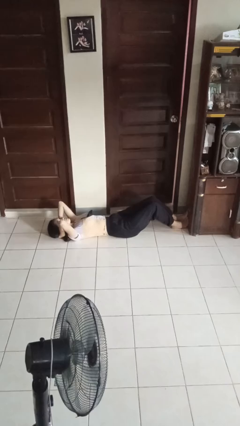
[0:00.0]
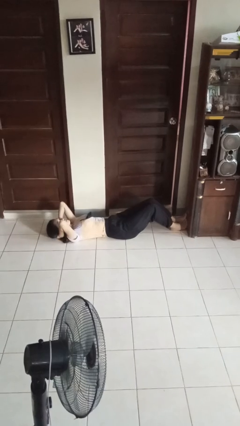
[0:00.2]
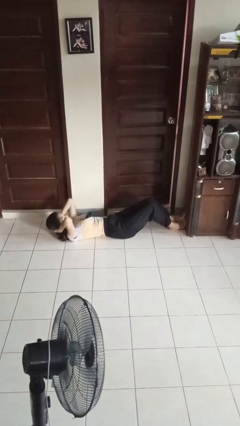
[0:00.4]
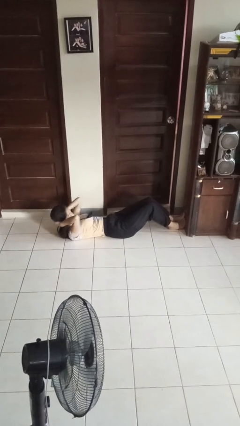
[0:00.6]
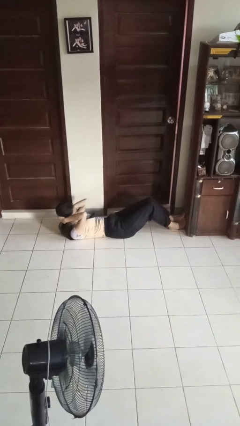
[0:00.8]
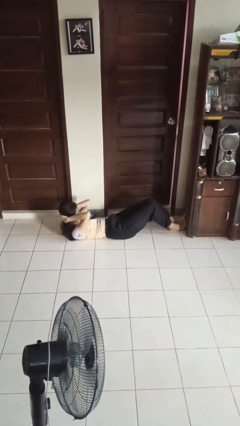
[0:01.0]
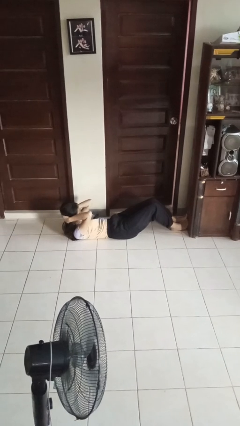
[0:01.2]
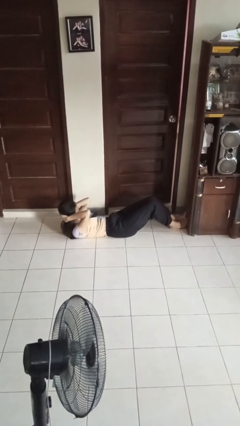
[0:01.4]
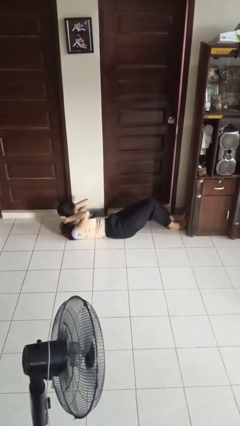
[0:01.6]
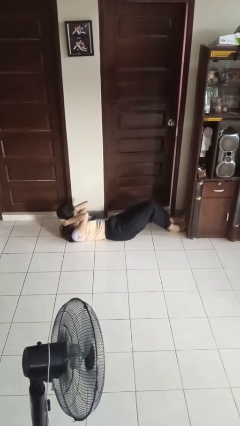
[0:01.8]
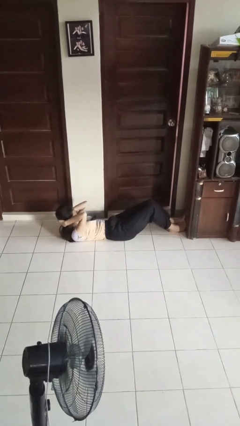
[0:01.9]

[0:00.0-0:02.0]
person exercises with situp

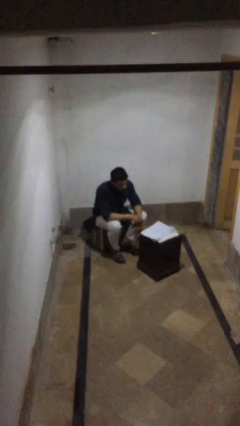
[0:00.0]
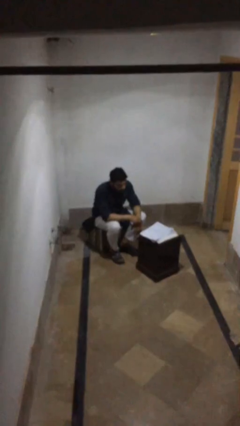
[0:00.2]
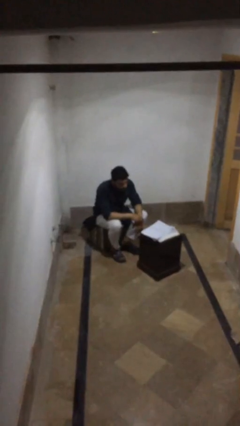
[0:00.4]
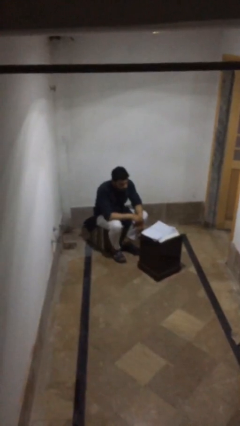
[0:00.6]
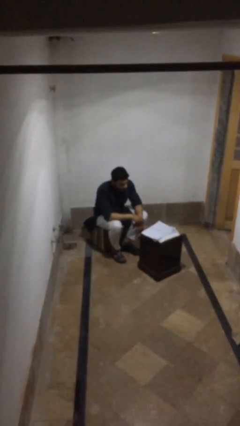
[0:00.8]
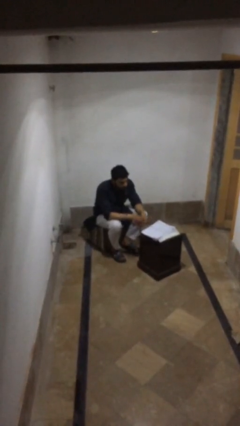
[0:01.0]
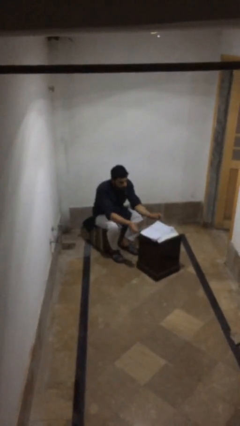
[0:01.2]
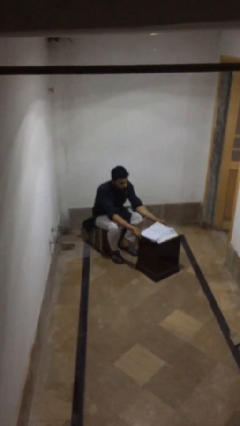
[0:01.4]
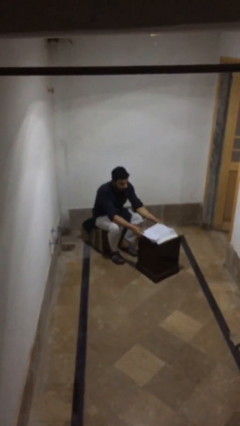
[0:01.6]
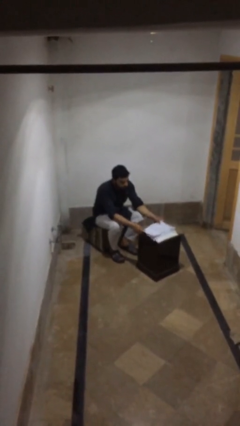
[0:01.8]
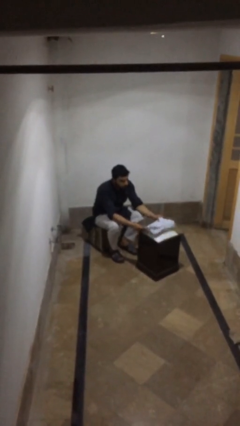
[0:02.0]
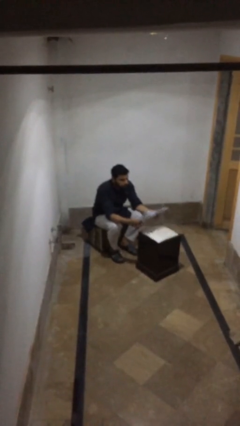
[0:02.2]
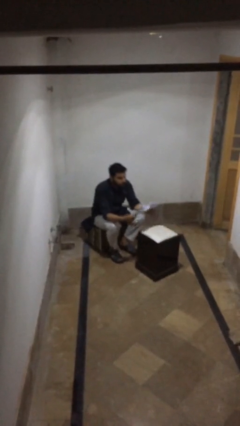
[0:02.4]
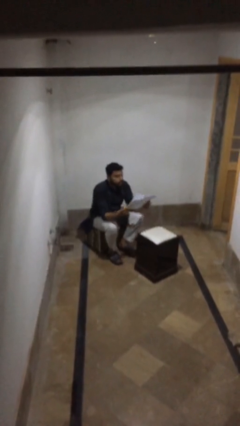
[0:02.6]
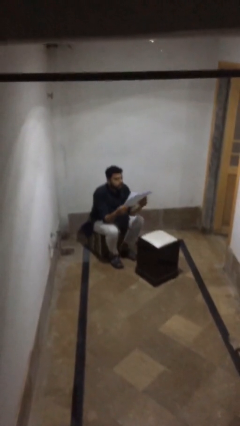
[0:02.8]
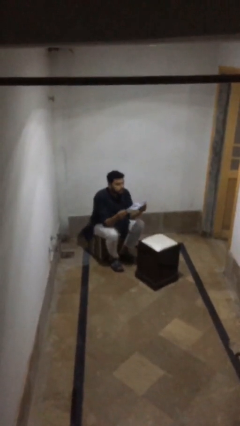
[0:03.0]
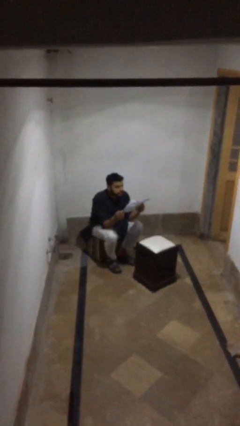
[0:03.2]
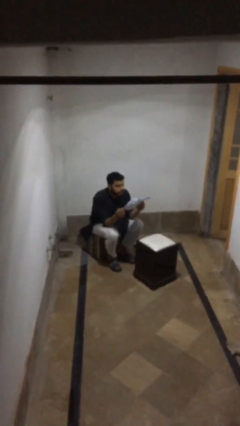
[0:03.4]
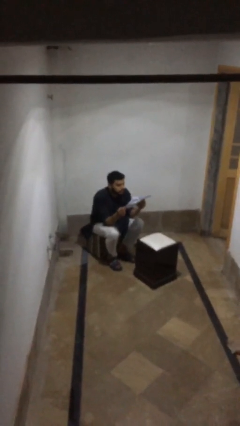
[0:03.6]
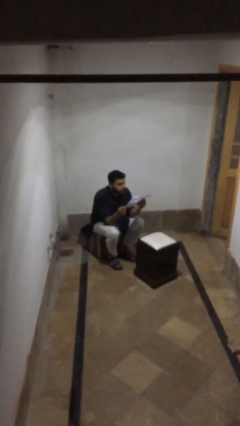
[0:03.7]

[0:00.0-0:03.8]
person picks up object from table

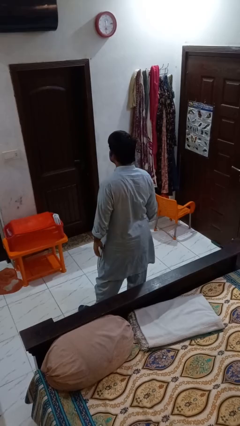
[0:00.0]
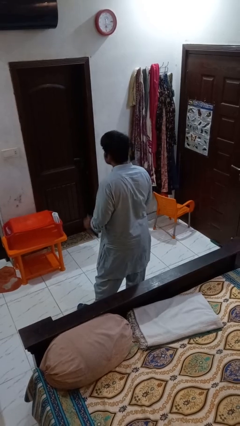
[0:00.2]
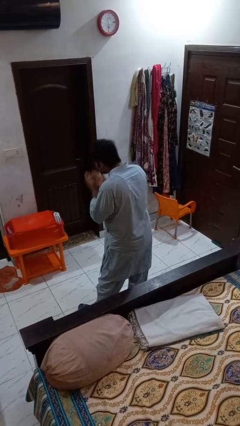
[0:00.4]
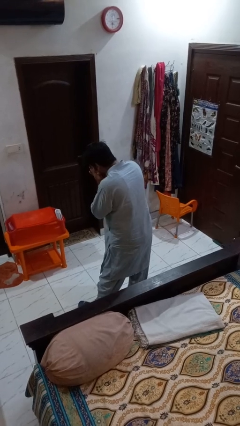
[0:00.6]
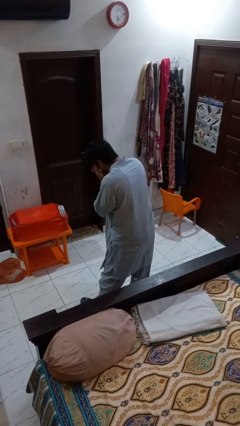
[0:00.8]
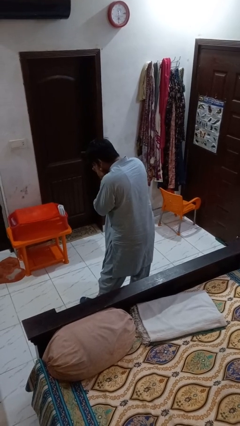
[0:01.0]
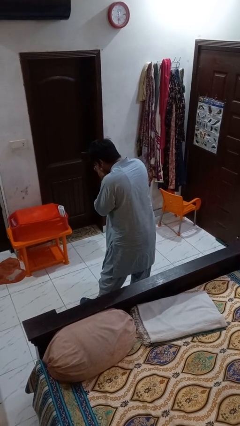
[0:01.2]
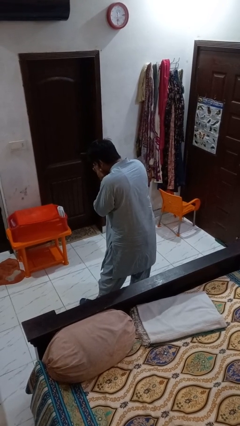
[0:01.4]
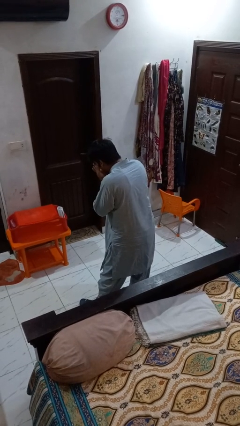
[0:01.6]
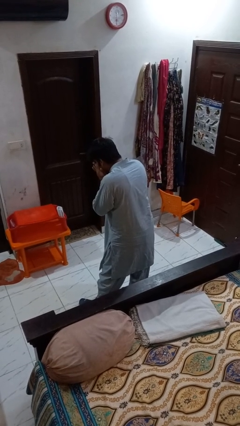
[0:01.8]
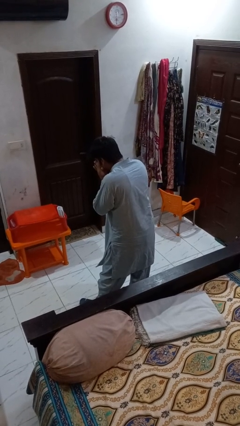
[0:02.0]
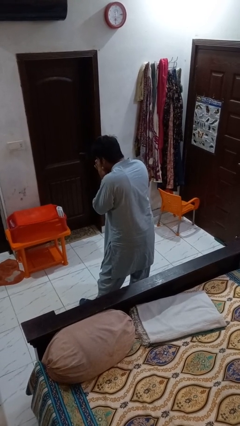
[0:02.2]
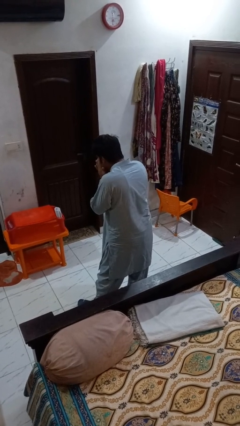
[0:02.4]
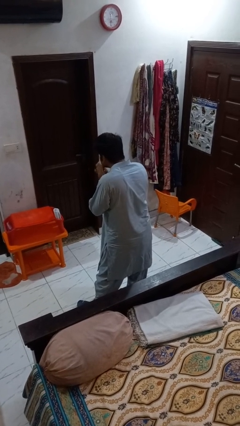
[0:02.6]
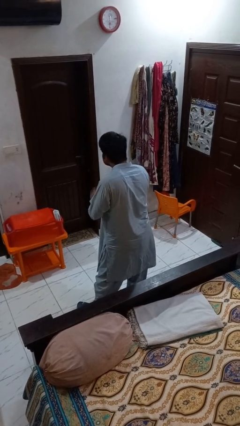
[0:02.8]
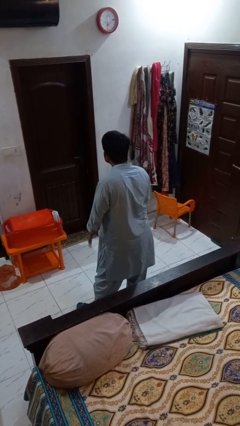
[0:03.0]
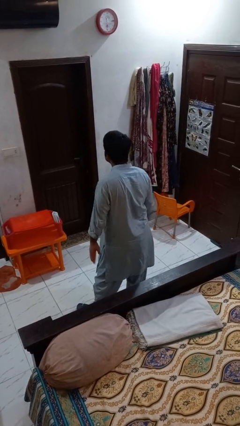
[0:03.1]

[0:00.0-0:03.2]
person sneezes into hand

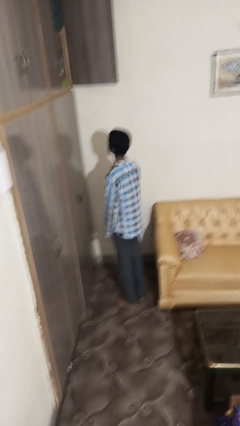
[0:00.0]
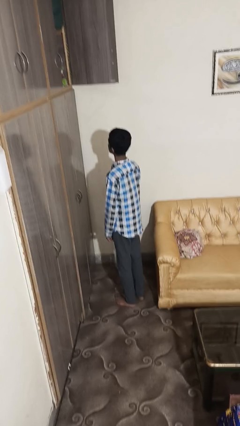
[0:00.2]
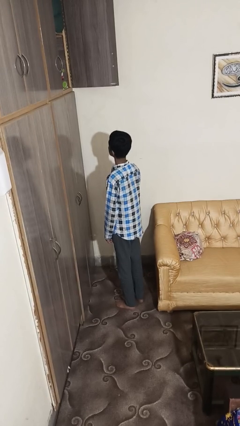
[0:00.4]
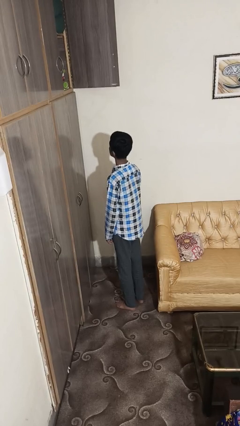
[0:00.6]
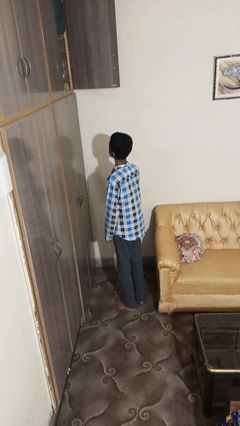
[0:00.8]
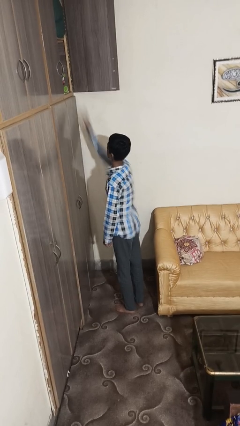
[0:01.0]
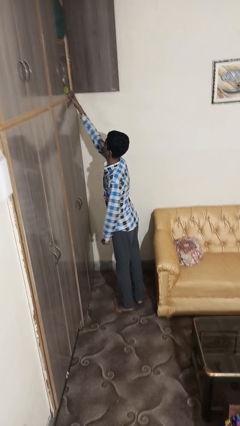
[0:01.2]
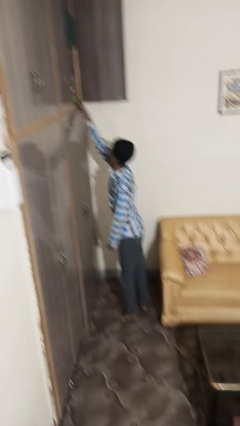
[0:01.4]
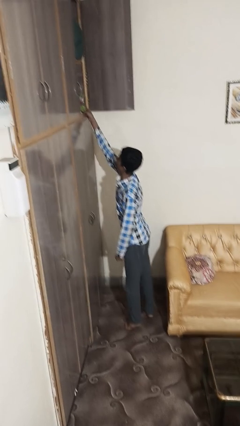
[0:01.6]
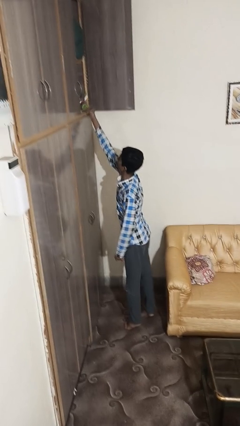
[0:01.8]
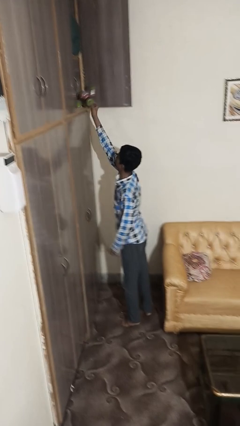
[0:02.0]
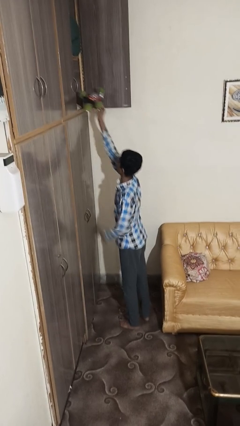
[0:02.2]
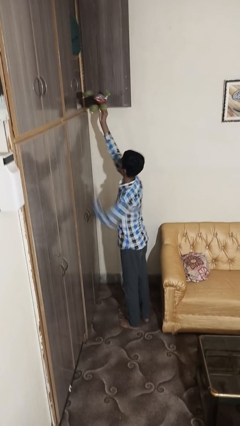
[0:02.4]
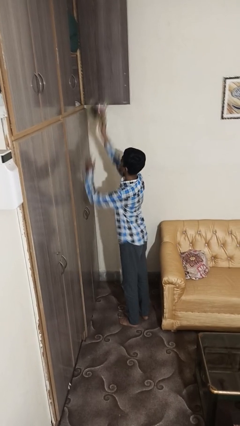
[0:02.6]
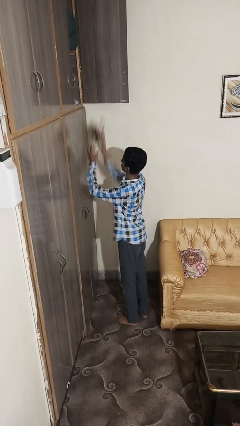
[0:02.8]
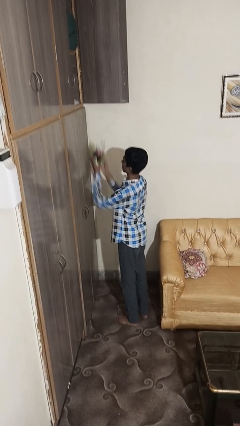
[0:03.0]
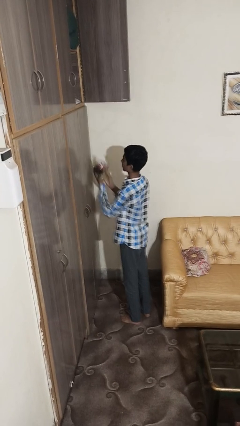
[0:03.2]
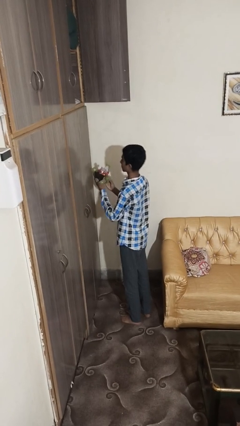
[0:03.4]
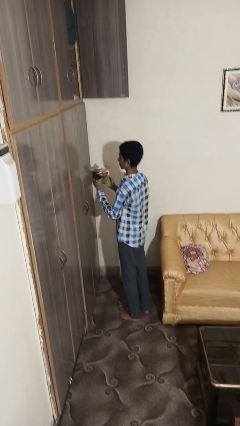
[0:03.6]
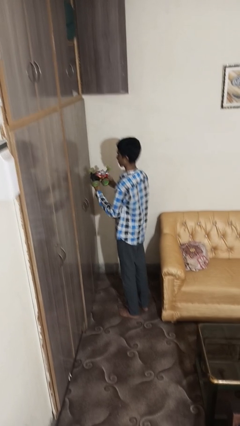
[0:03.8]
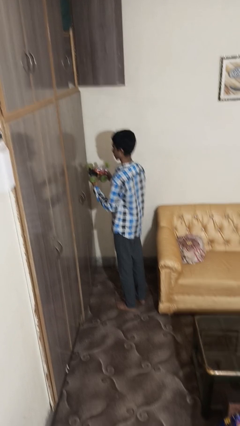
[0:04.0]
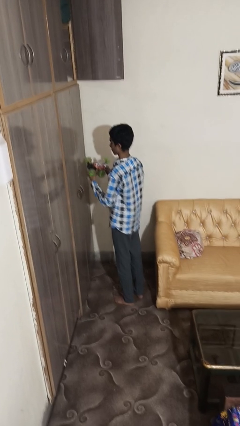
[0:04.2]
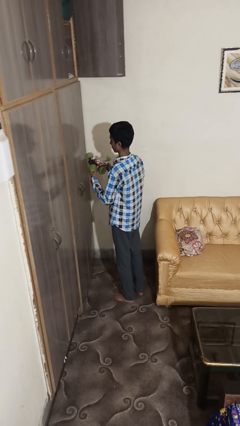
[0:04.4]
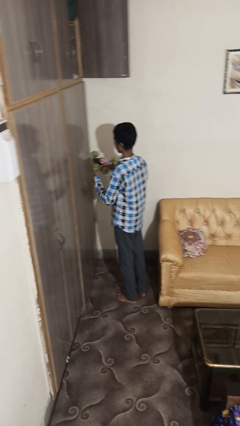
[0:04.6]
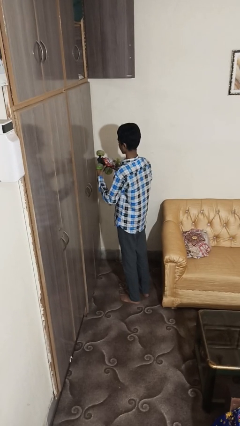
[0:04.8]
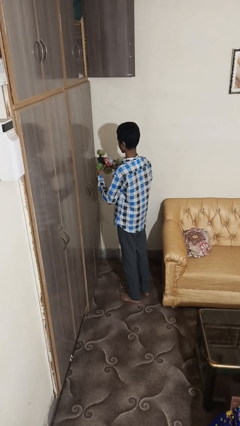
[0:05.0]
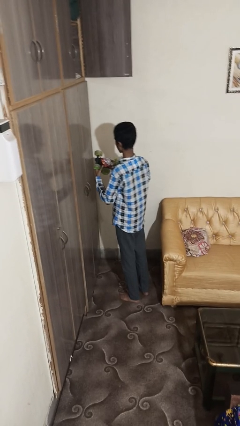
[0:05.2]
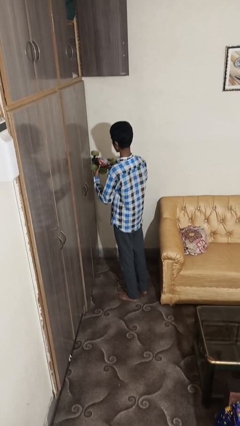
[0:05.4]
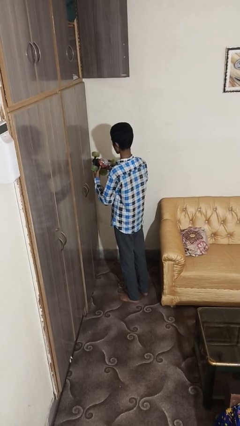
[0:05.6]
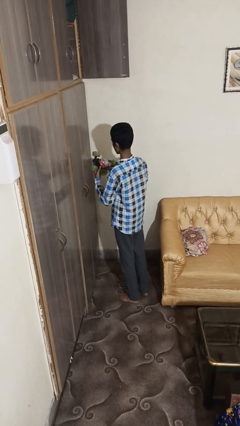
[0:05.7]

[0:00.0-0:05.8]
person picks up object from shelf

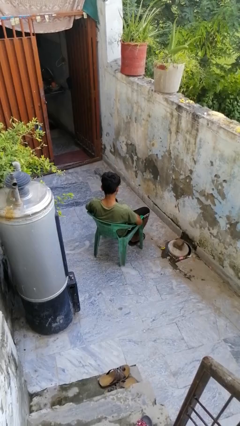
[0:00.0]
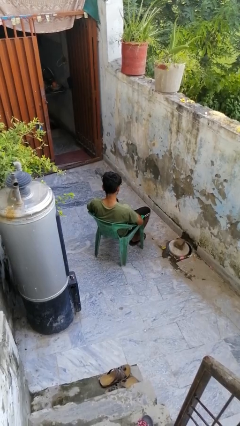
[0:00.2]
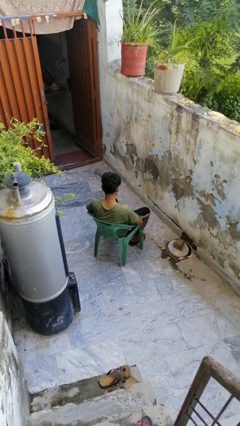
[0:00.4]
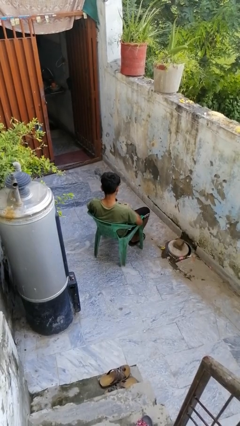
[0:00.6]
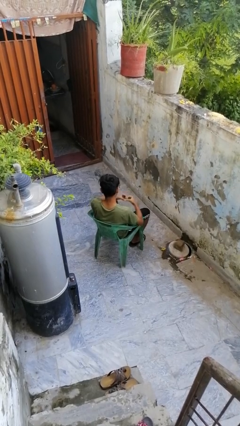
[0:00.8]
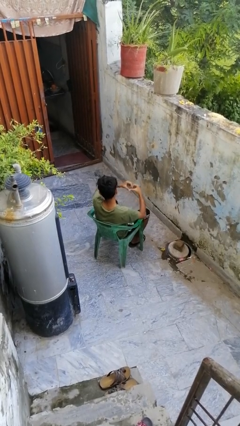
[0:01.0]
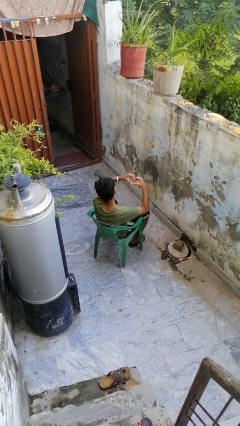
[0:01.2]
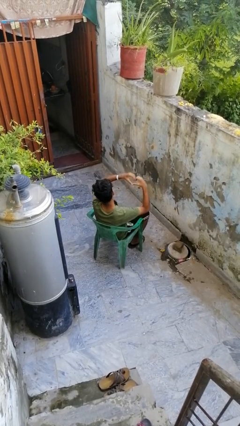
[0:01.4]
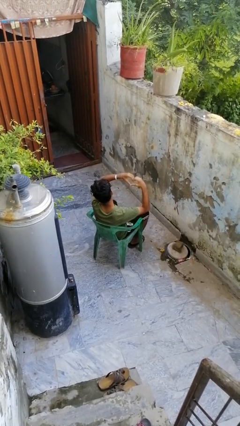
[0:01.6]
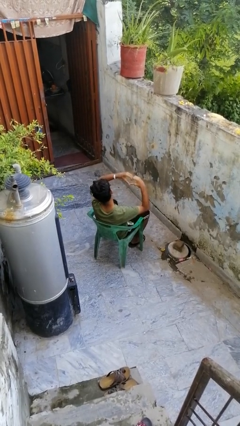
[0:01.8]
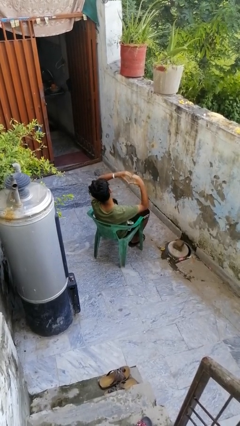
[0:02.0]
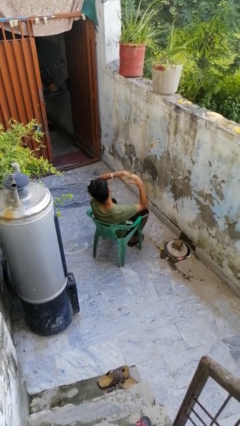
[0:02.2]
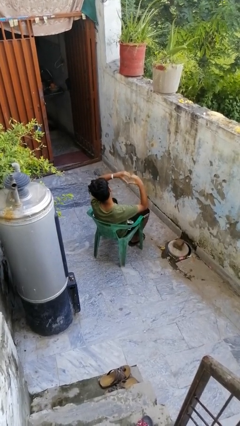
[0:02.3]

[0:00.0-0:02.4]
person gestures heart

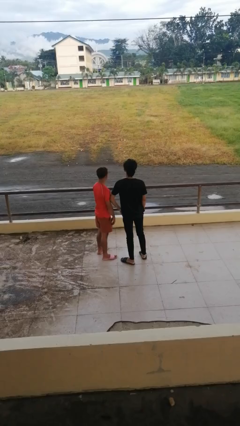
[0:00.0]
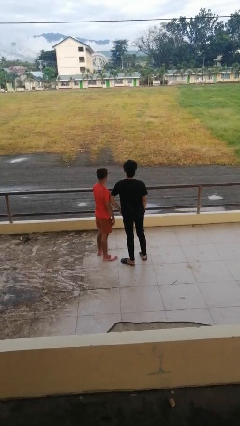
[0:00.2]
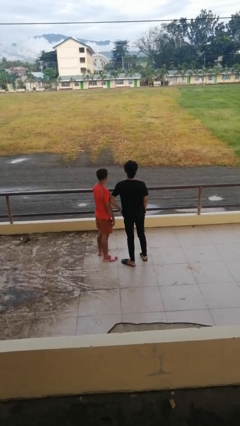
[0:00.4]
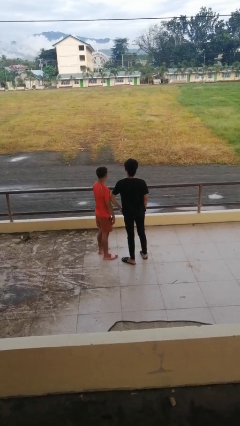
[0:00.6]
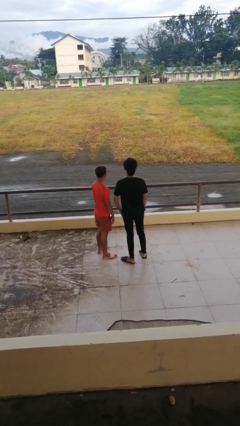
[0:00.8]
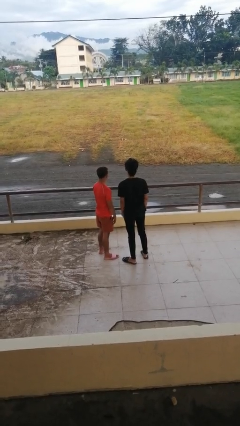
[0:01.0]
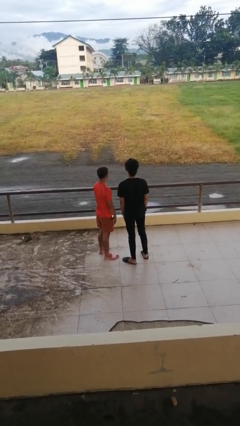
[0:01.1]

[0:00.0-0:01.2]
person nudges person with elbow
